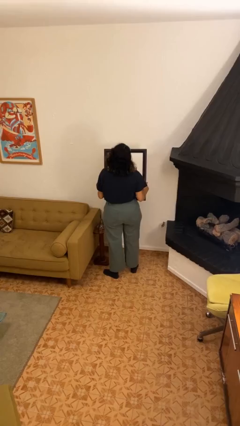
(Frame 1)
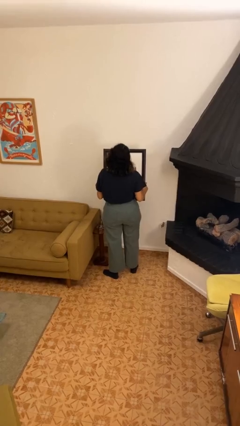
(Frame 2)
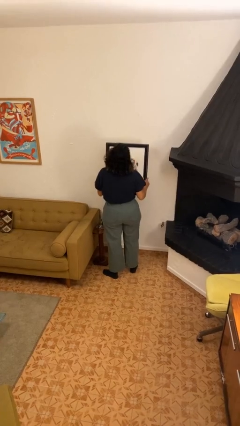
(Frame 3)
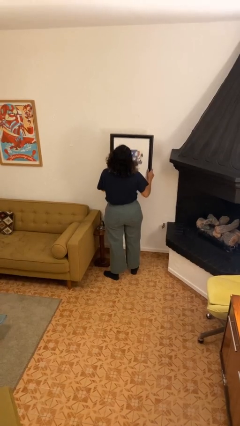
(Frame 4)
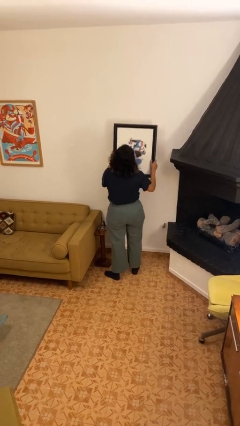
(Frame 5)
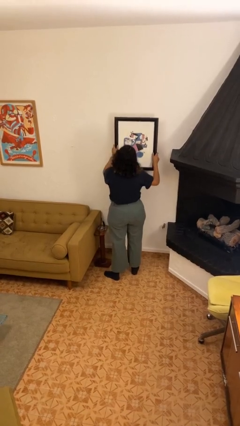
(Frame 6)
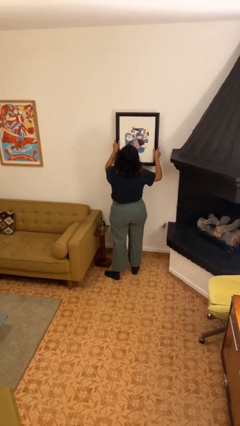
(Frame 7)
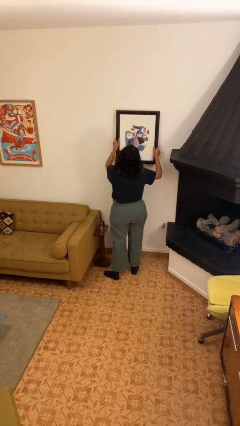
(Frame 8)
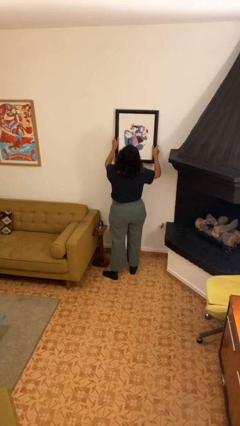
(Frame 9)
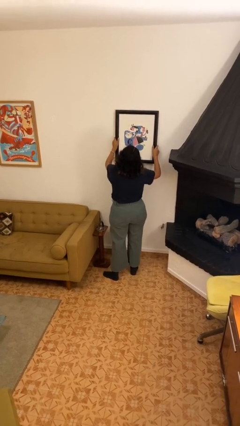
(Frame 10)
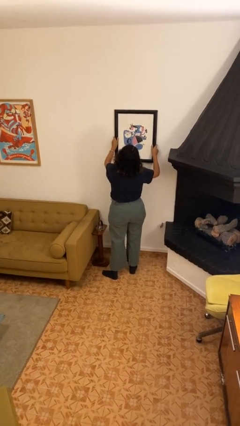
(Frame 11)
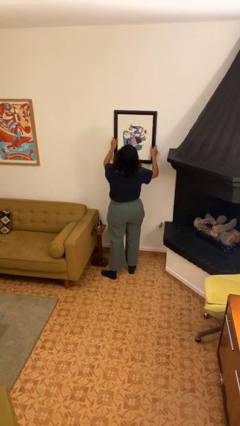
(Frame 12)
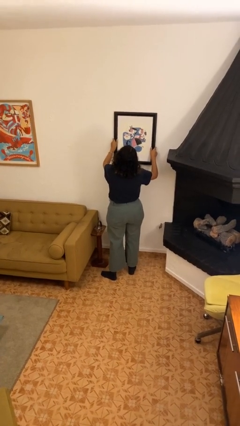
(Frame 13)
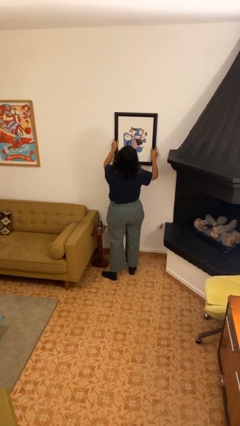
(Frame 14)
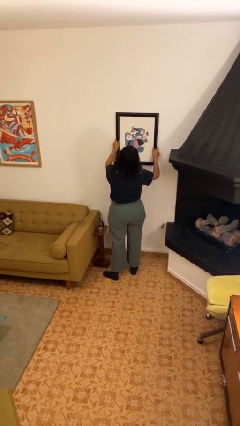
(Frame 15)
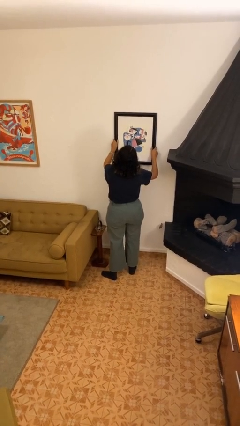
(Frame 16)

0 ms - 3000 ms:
person puts up picture frame

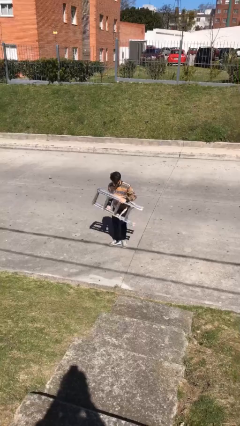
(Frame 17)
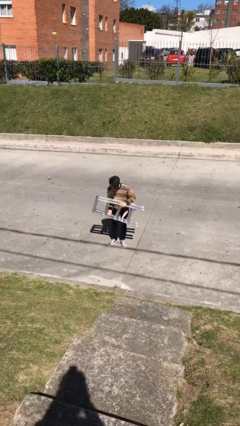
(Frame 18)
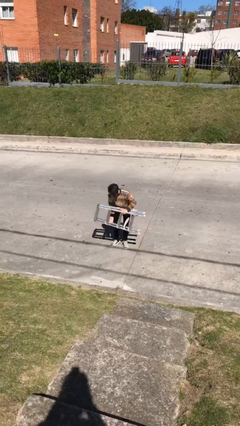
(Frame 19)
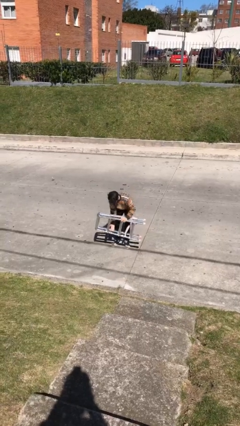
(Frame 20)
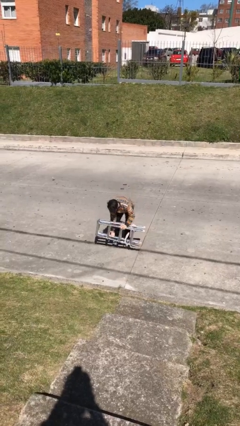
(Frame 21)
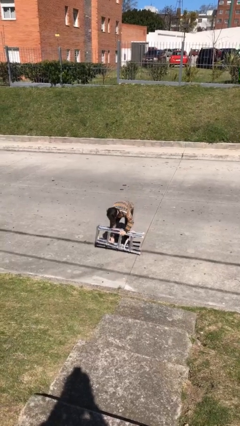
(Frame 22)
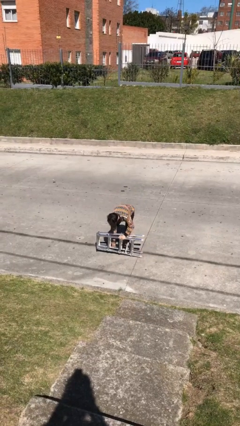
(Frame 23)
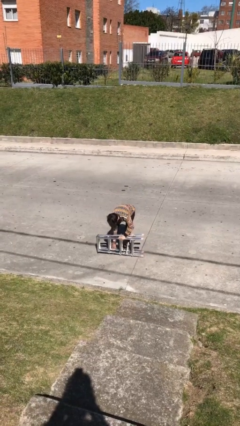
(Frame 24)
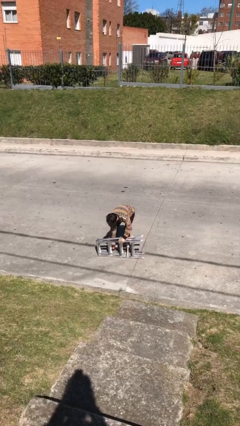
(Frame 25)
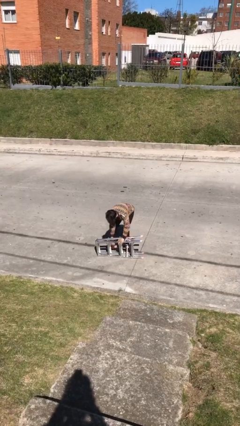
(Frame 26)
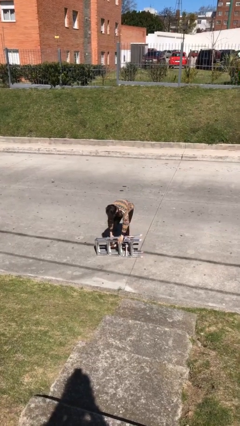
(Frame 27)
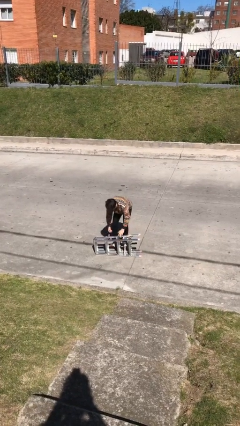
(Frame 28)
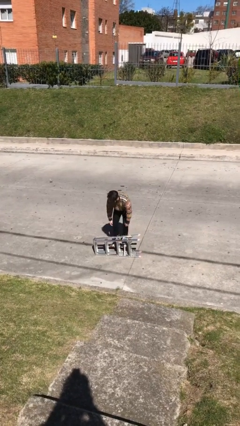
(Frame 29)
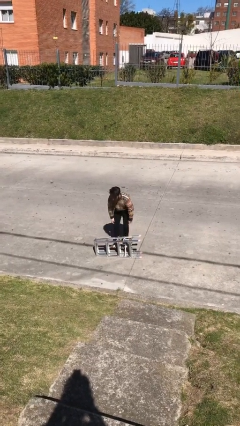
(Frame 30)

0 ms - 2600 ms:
person puts down object on floor

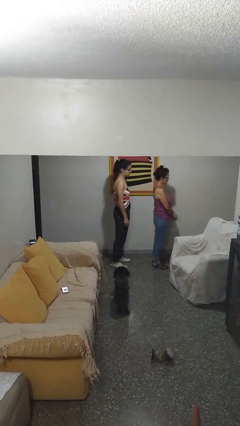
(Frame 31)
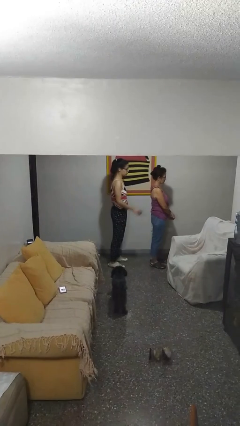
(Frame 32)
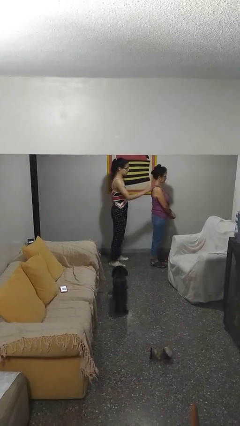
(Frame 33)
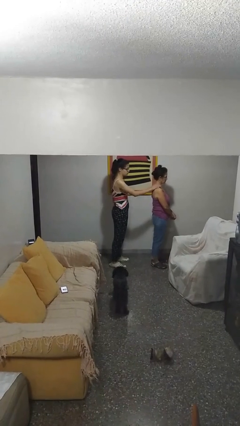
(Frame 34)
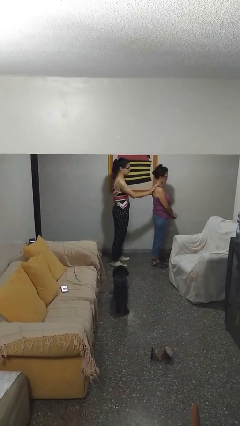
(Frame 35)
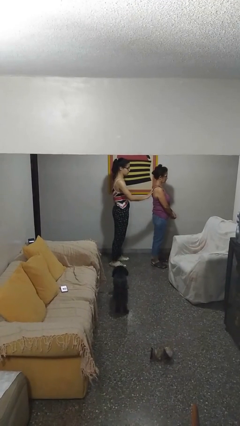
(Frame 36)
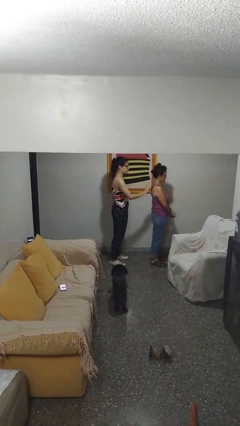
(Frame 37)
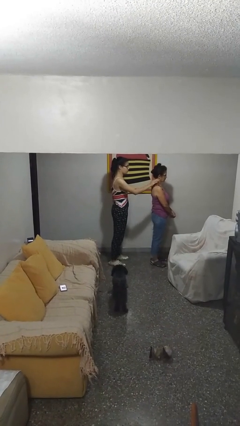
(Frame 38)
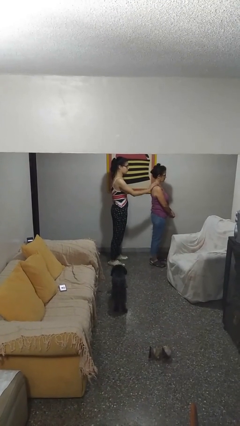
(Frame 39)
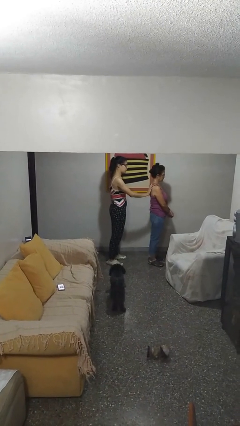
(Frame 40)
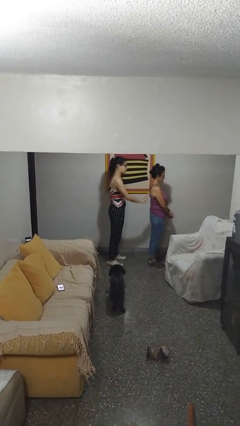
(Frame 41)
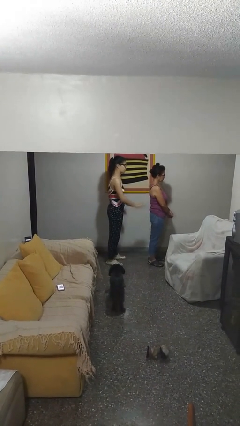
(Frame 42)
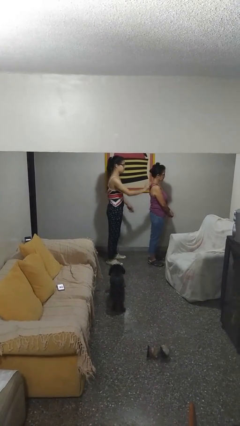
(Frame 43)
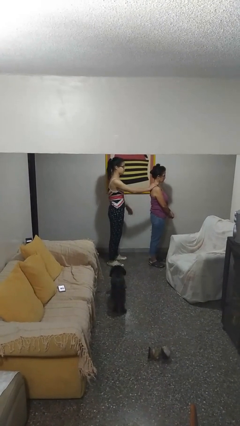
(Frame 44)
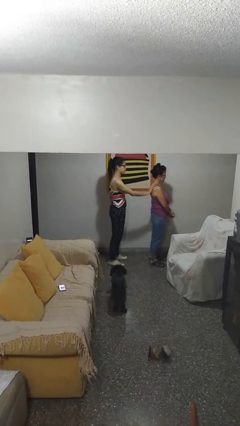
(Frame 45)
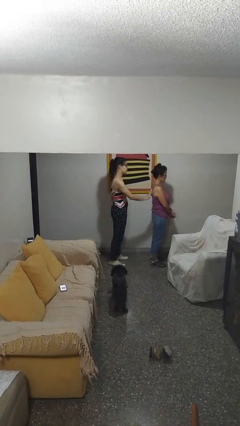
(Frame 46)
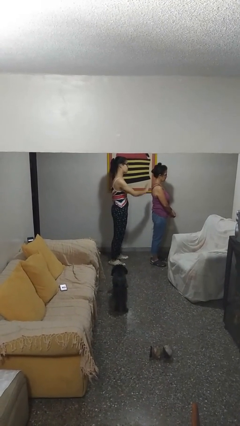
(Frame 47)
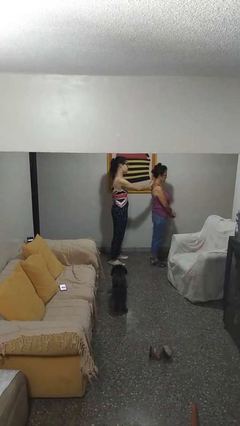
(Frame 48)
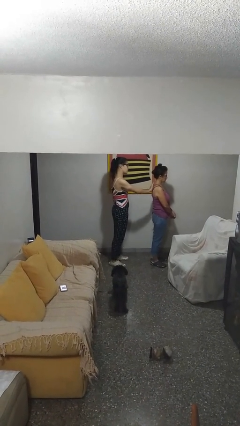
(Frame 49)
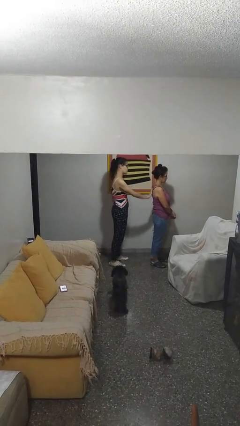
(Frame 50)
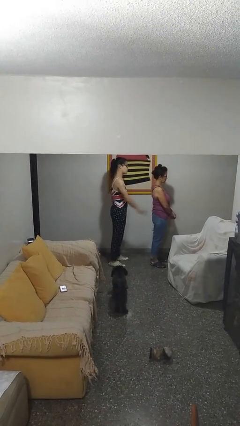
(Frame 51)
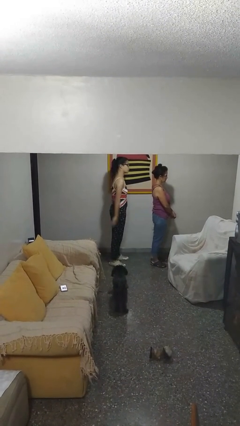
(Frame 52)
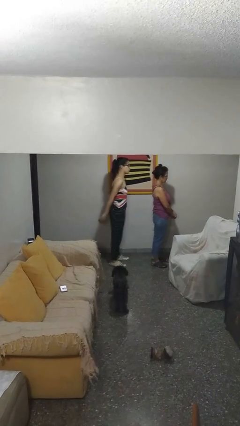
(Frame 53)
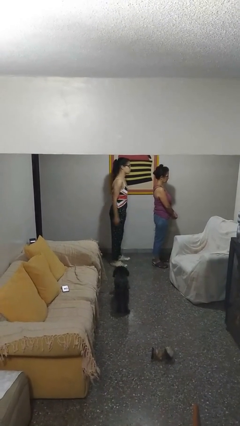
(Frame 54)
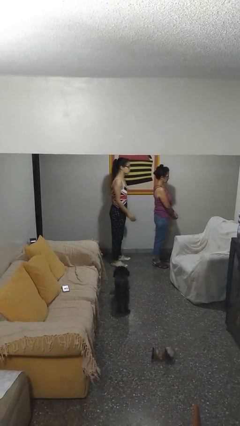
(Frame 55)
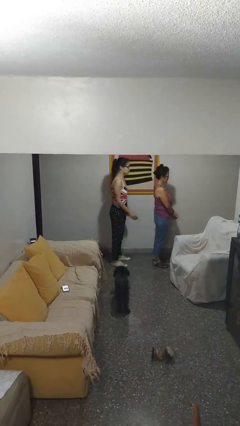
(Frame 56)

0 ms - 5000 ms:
person touches back of person

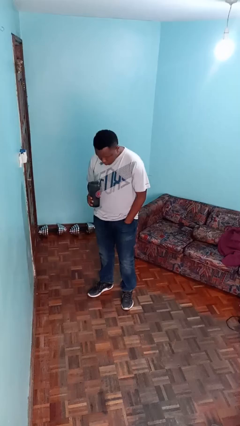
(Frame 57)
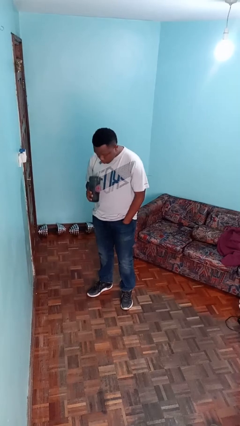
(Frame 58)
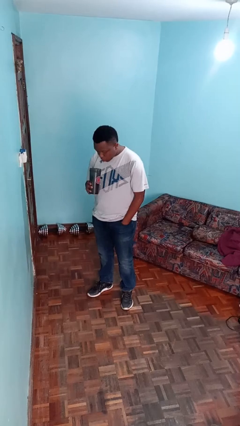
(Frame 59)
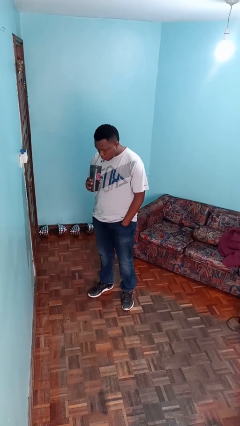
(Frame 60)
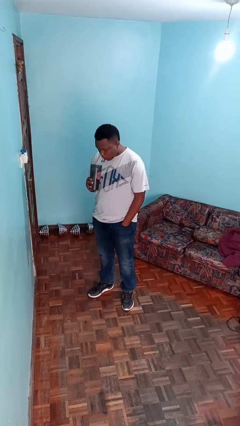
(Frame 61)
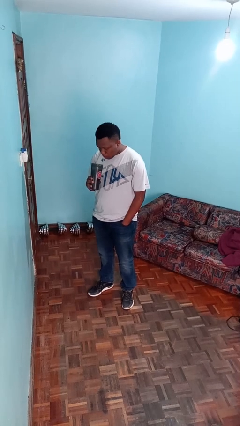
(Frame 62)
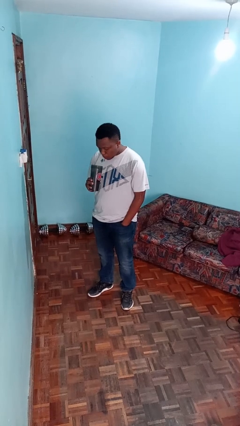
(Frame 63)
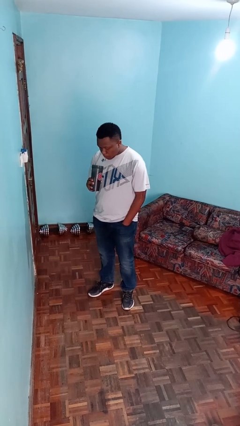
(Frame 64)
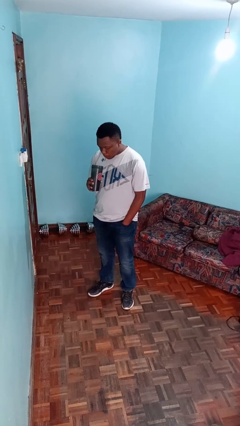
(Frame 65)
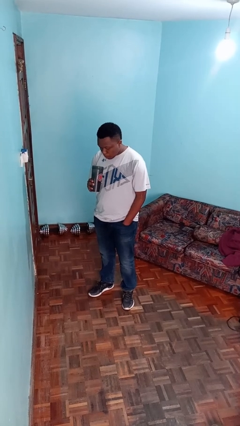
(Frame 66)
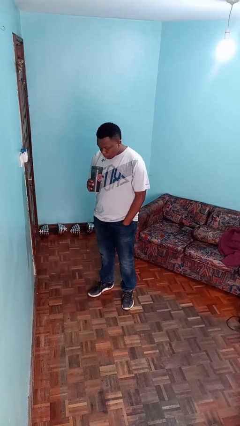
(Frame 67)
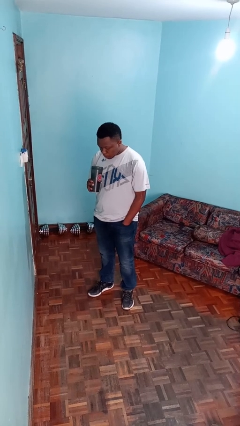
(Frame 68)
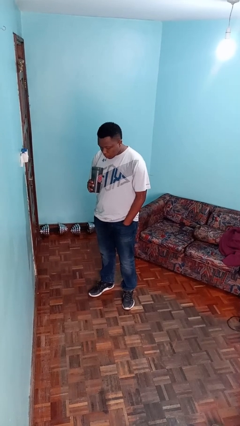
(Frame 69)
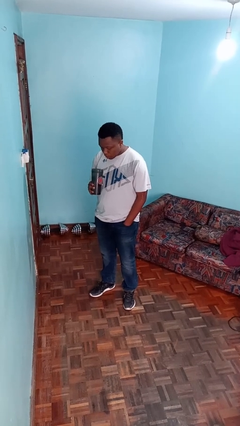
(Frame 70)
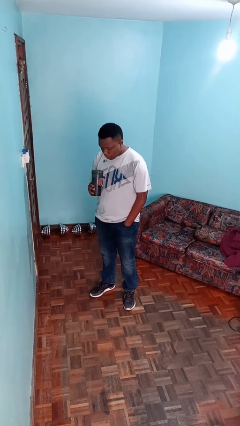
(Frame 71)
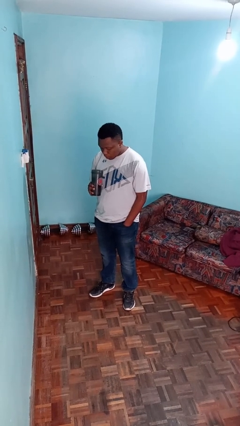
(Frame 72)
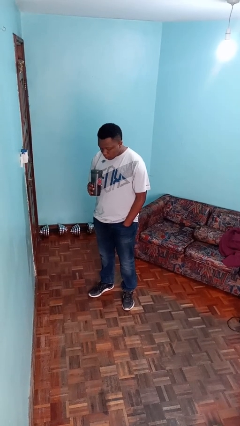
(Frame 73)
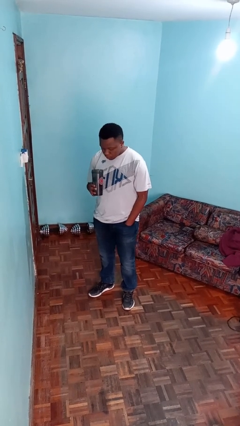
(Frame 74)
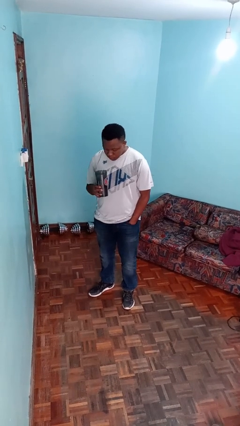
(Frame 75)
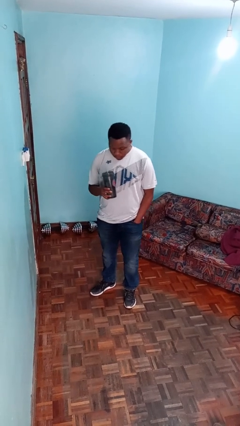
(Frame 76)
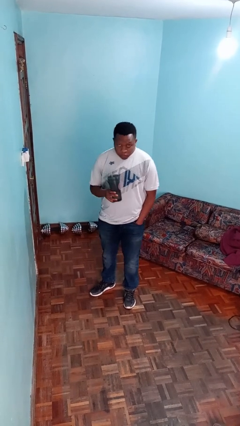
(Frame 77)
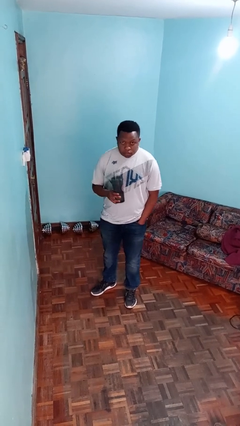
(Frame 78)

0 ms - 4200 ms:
person drinks from straw

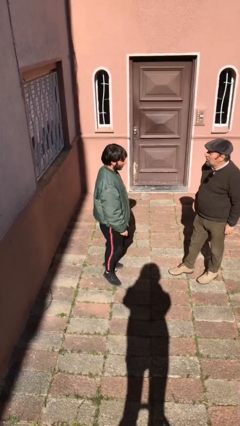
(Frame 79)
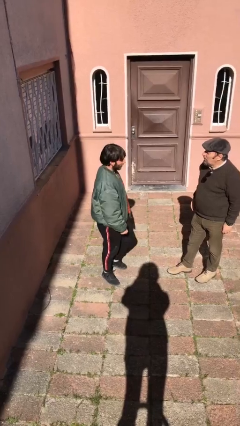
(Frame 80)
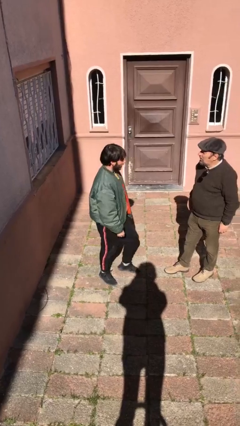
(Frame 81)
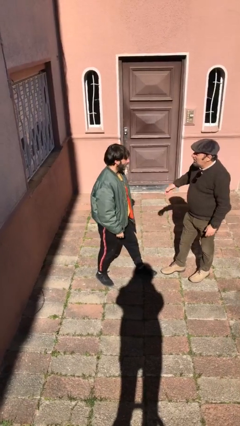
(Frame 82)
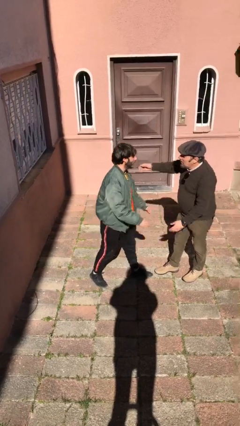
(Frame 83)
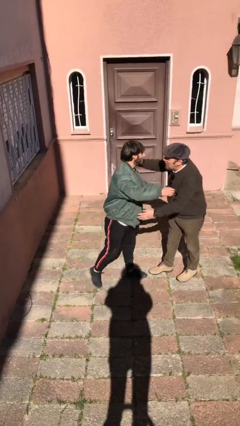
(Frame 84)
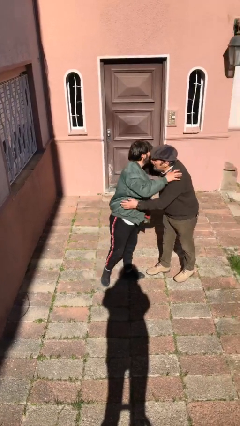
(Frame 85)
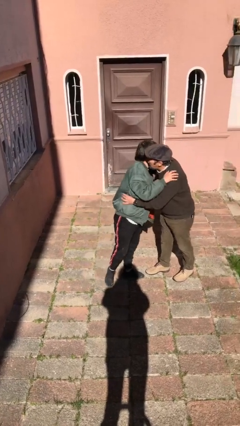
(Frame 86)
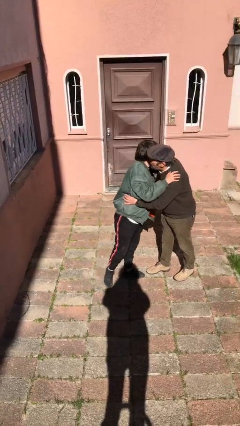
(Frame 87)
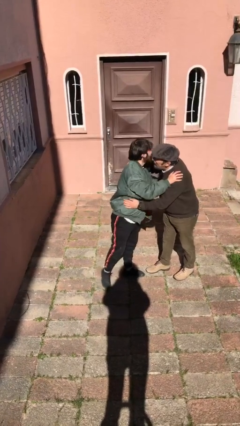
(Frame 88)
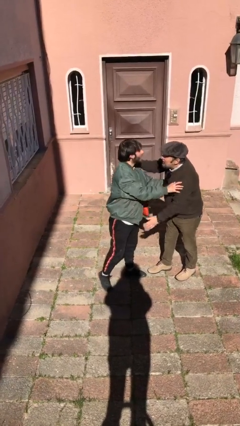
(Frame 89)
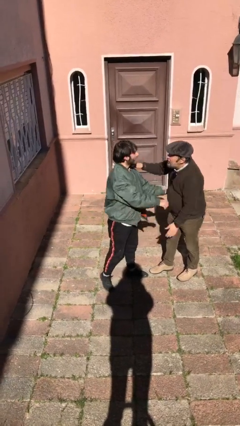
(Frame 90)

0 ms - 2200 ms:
person kisses cheek of person

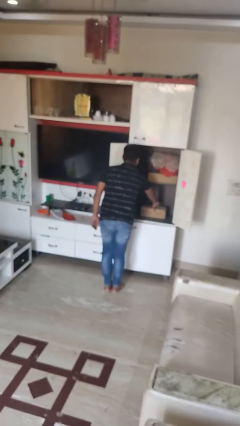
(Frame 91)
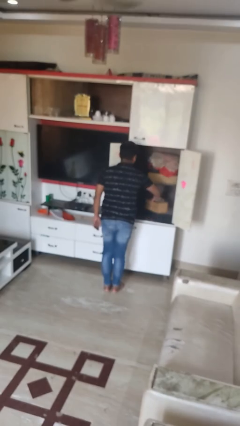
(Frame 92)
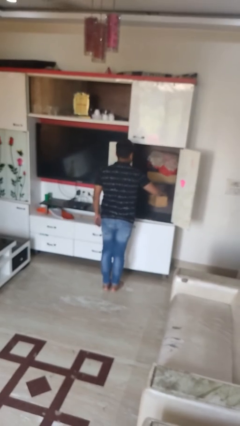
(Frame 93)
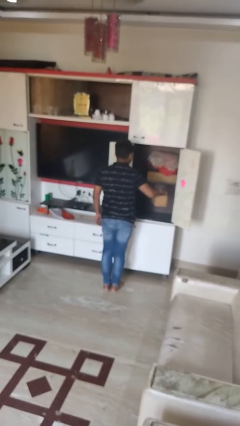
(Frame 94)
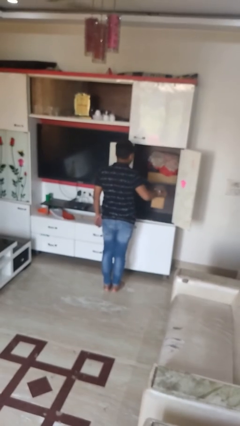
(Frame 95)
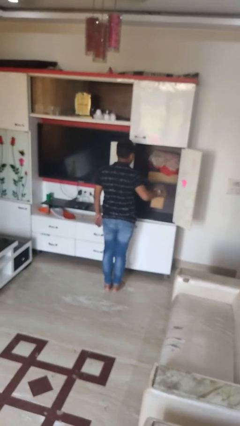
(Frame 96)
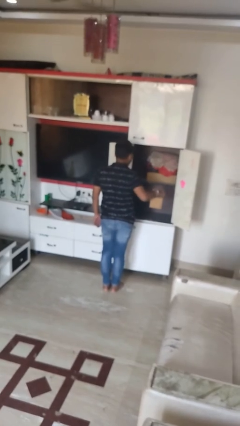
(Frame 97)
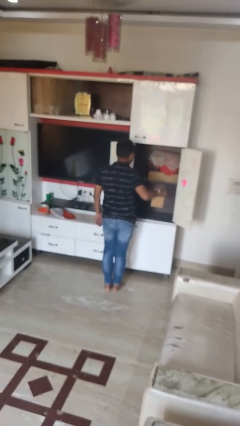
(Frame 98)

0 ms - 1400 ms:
person picks up object from cabinet
